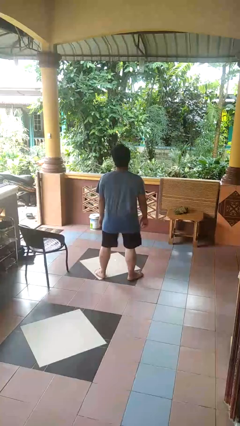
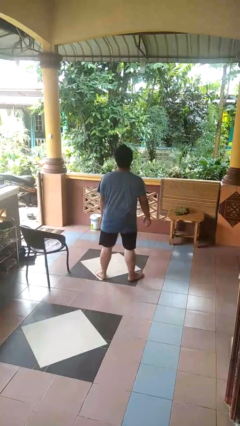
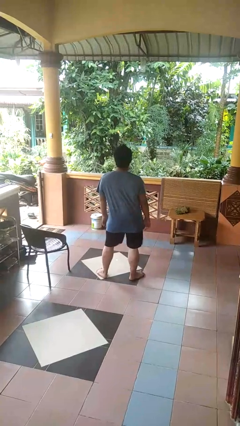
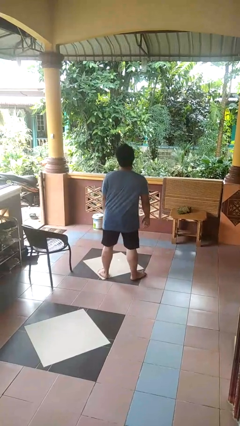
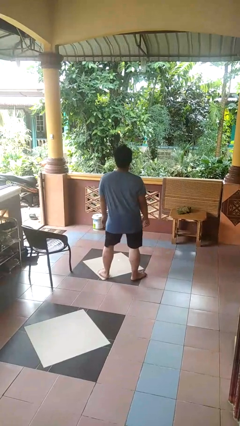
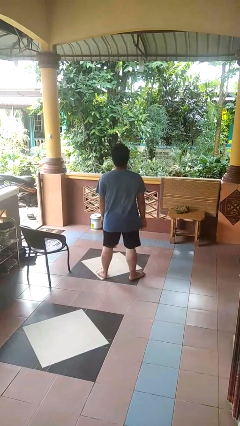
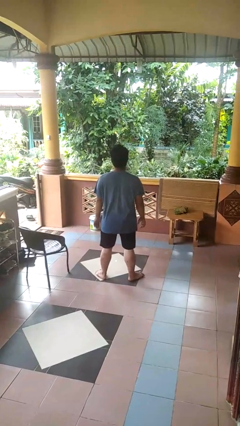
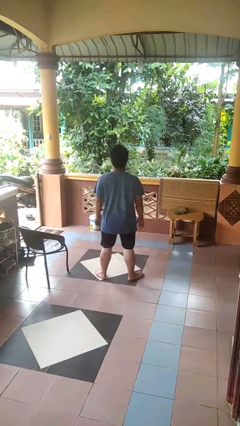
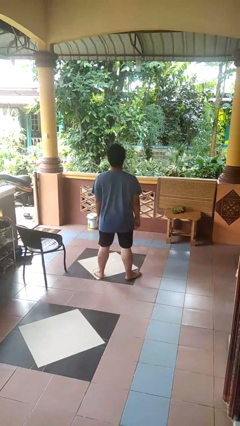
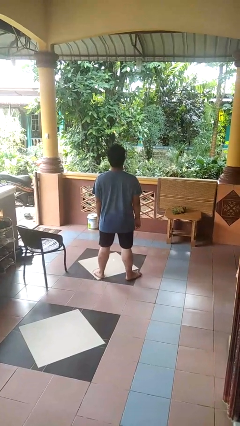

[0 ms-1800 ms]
person wiggles hips

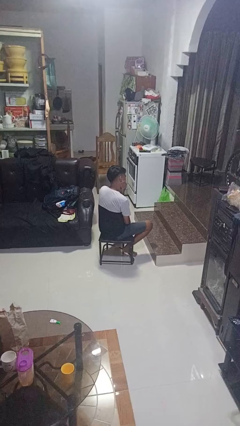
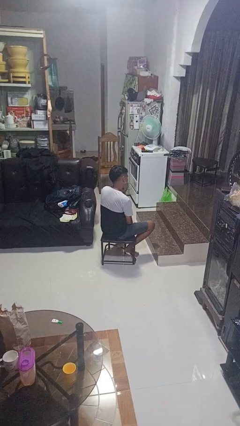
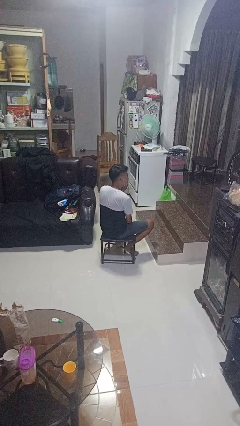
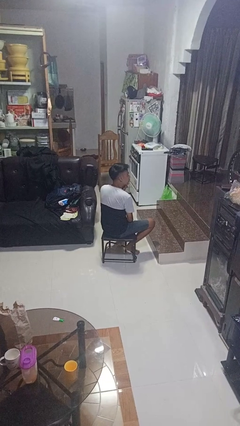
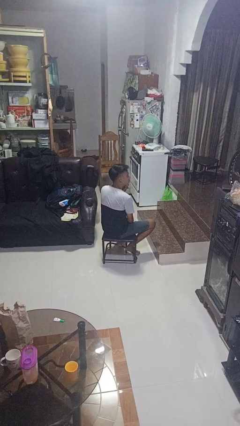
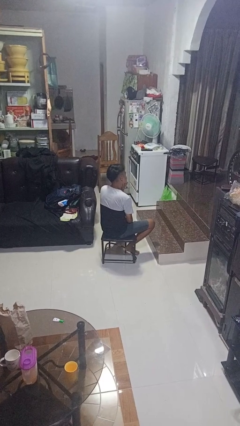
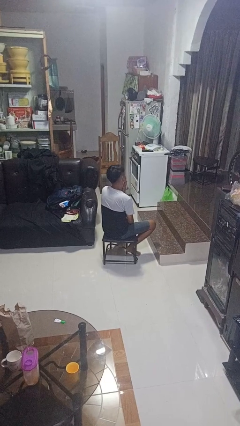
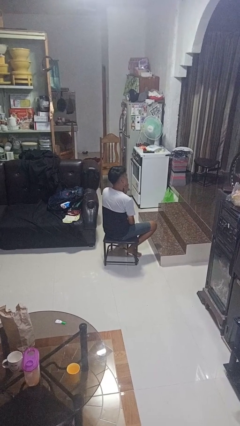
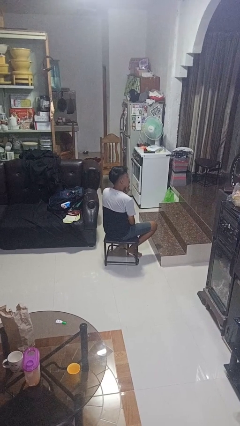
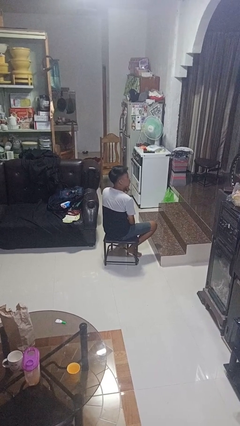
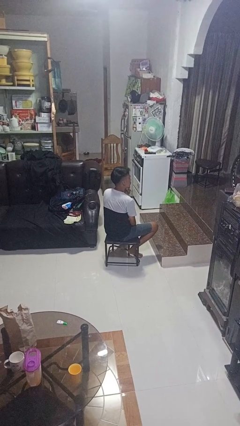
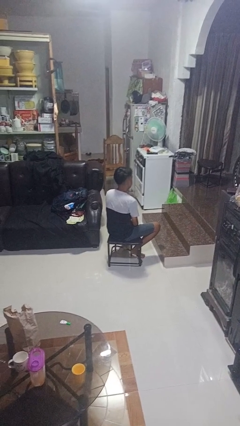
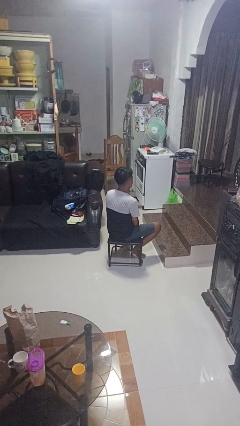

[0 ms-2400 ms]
person strokes chin

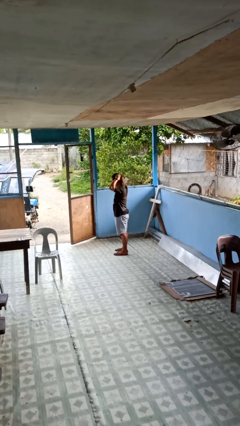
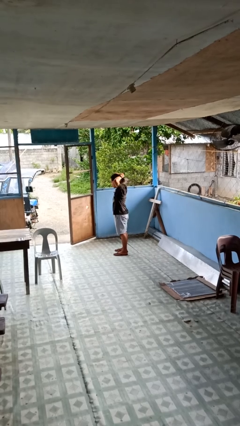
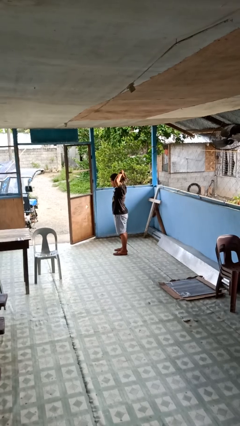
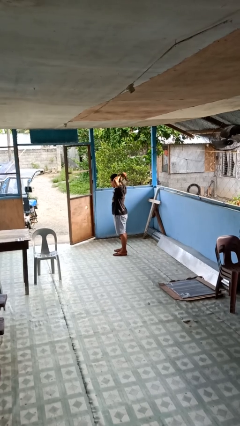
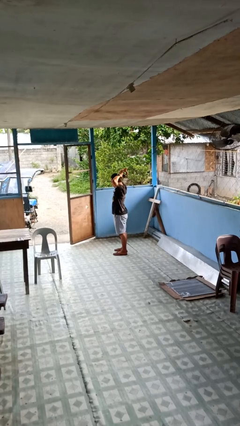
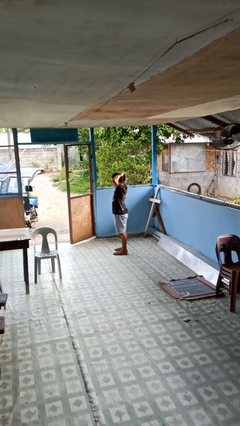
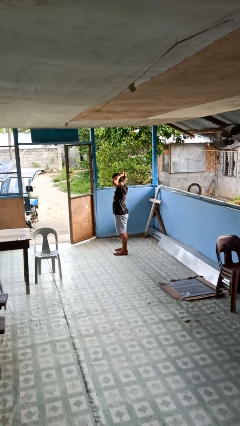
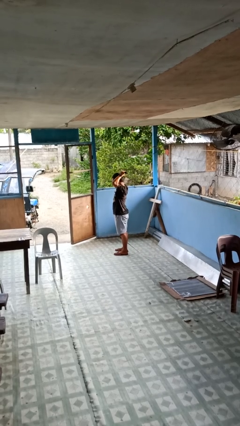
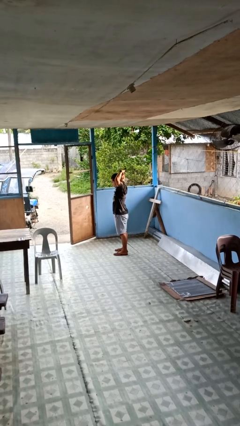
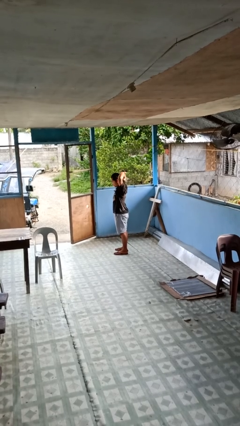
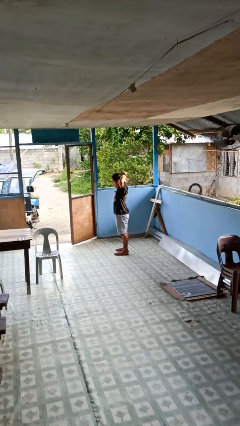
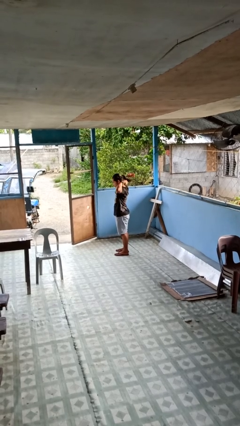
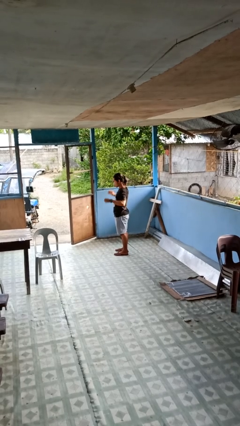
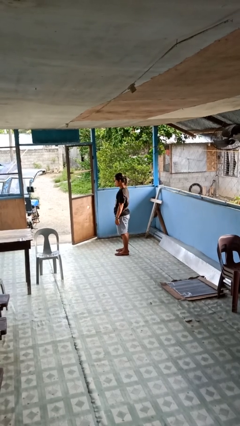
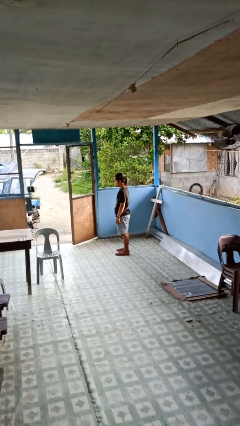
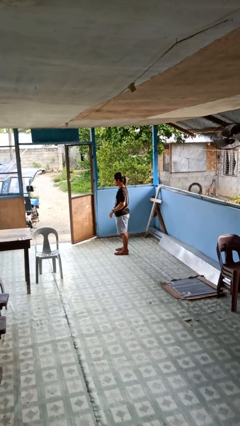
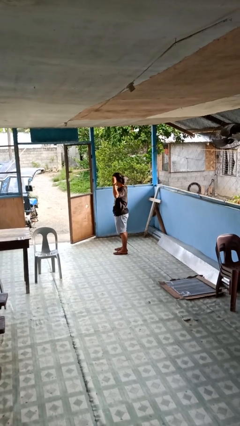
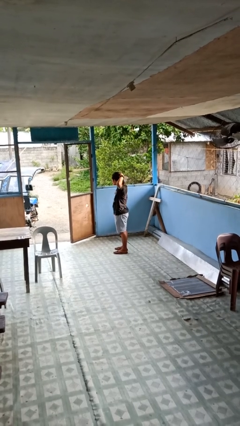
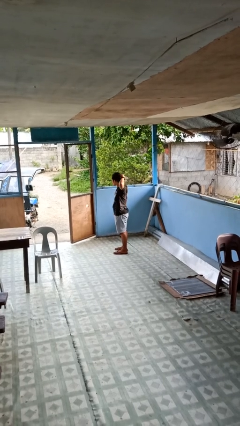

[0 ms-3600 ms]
person puts hair in ponytail

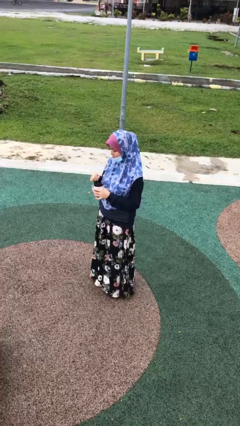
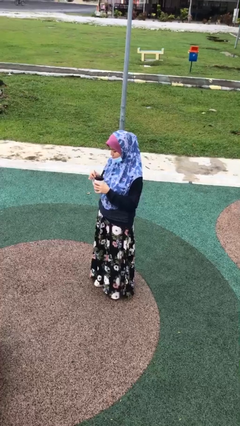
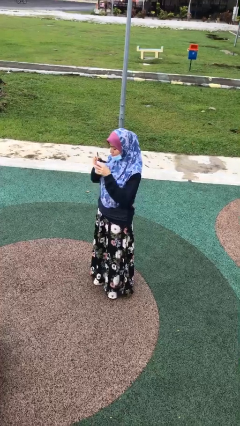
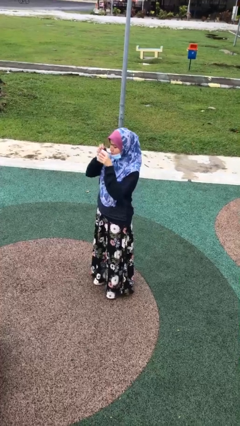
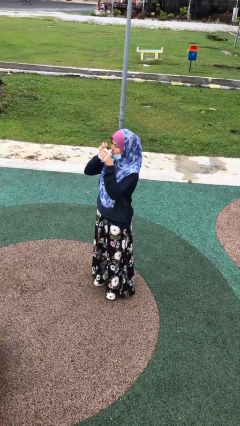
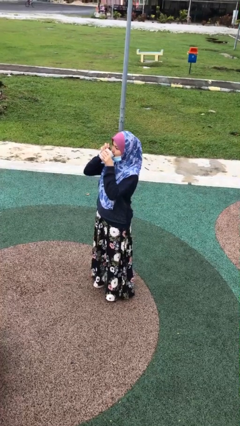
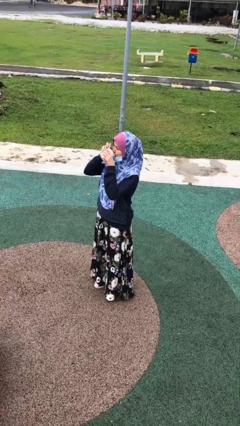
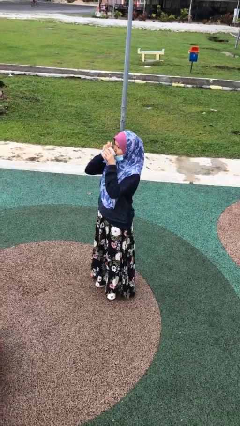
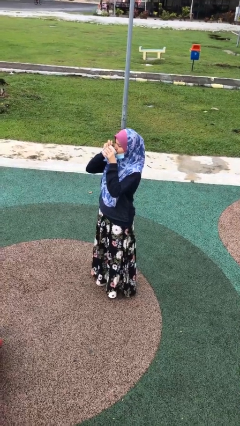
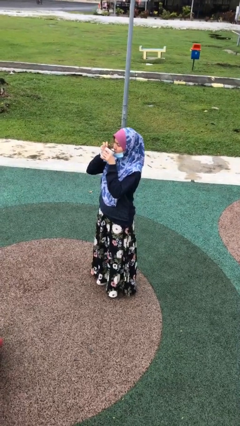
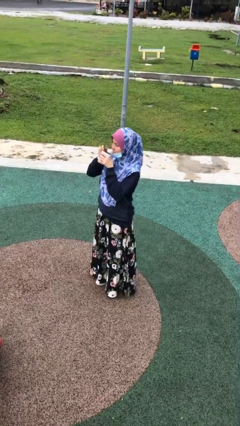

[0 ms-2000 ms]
person drinks from mug

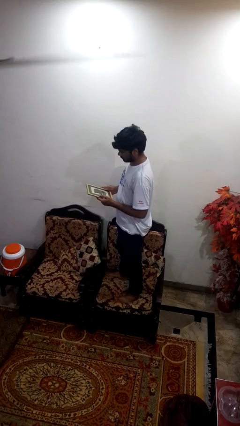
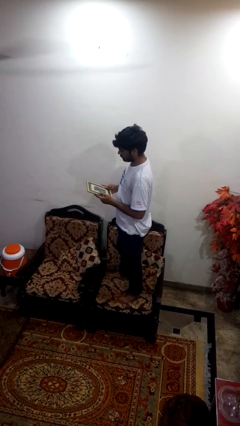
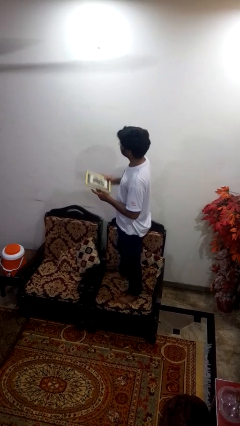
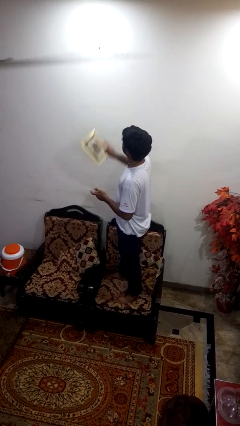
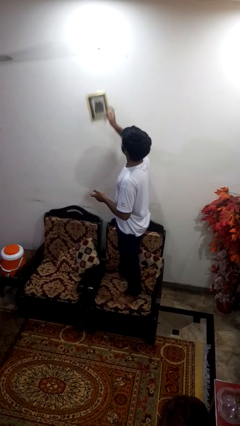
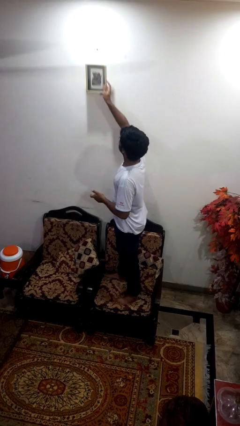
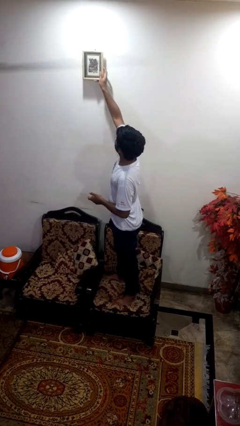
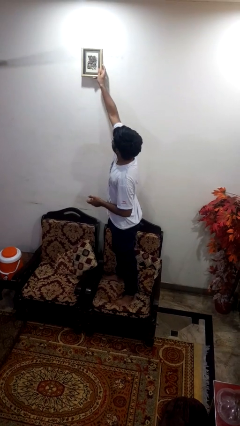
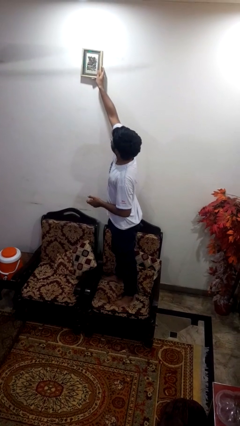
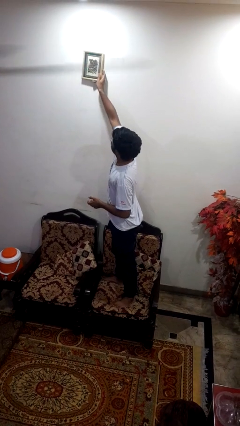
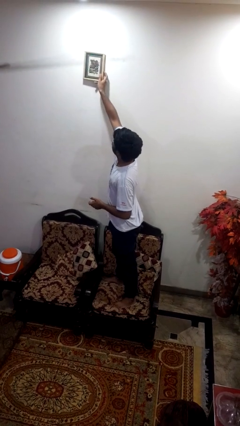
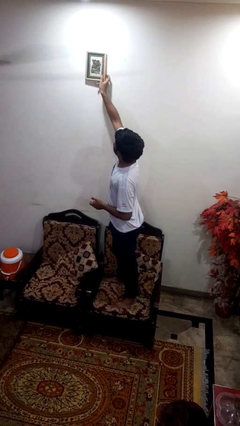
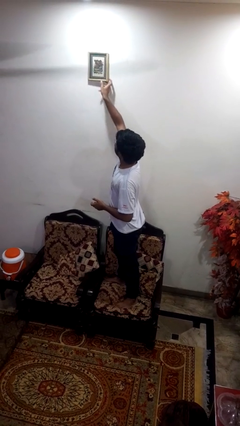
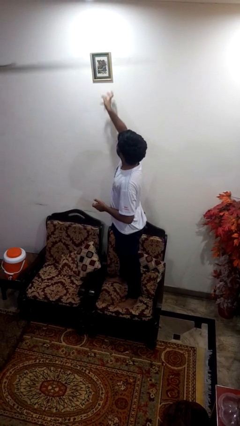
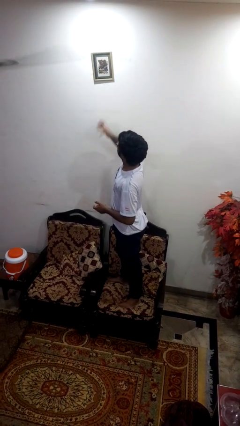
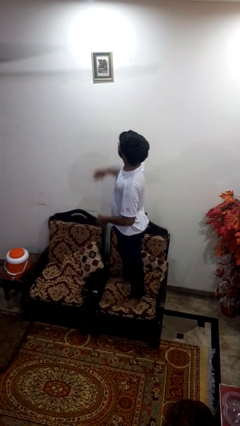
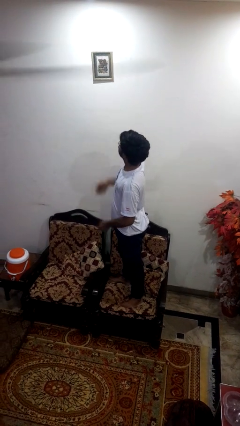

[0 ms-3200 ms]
person puts up picture frame

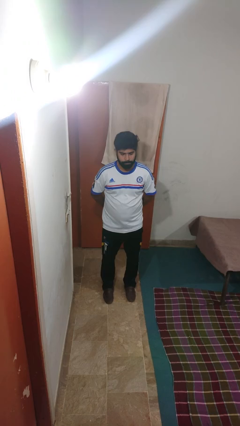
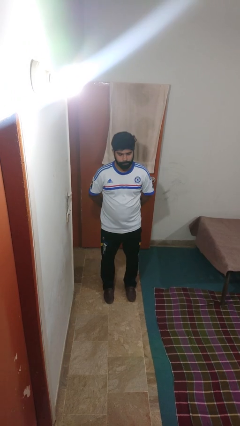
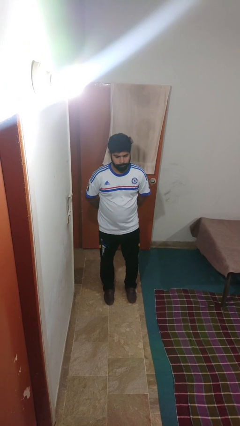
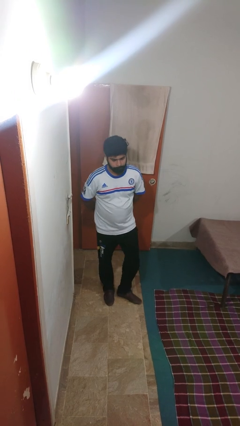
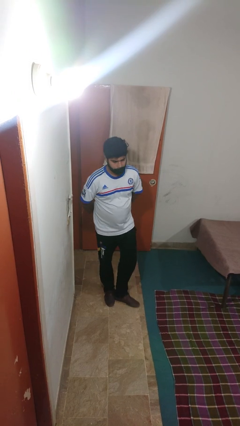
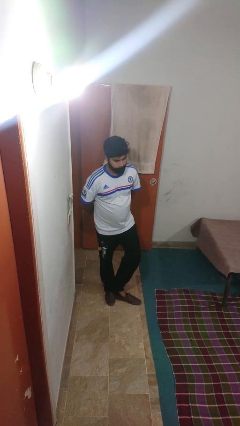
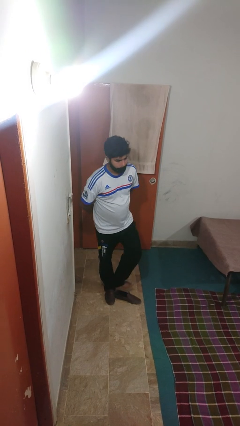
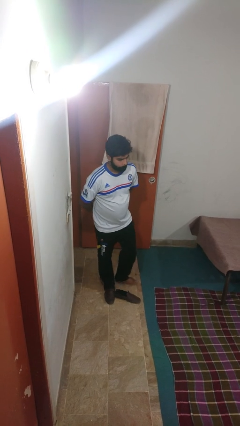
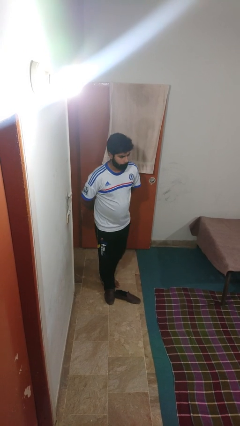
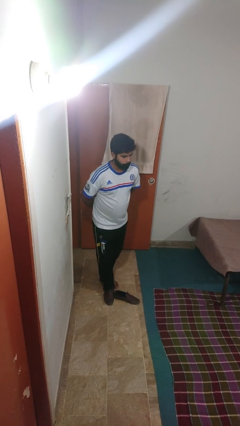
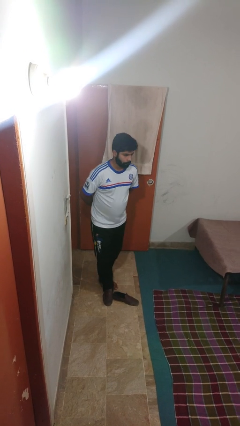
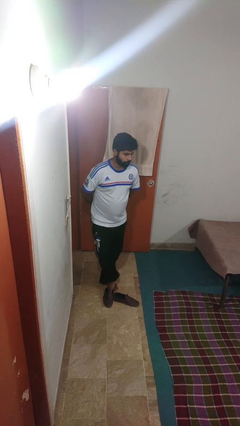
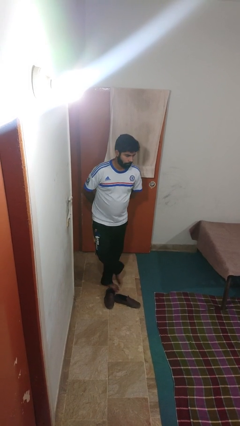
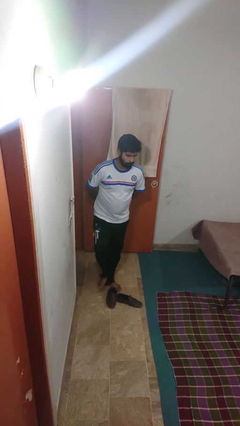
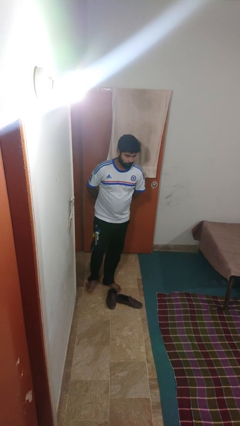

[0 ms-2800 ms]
person takes off shoes

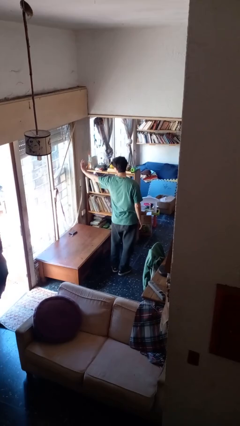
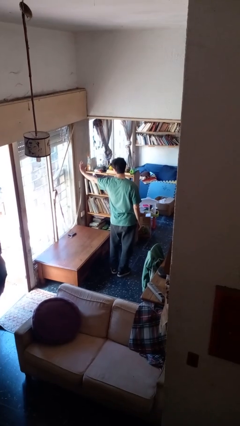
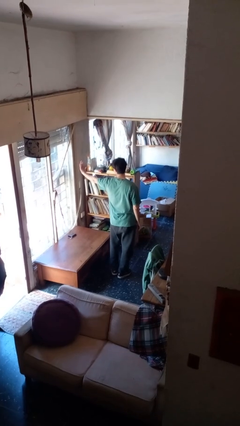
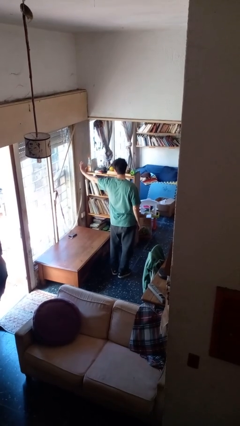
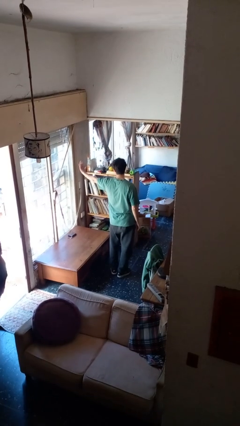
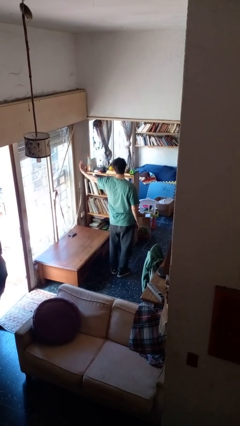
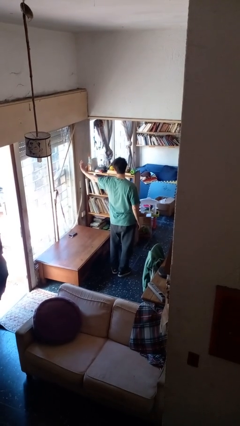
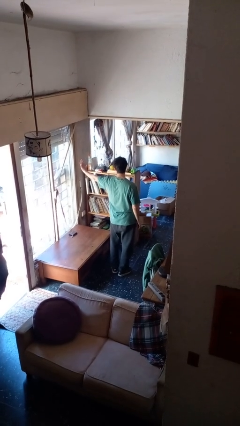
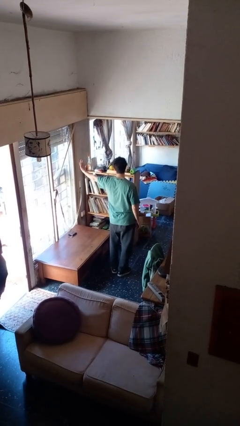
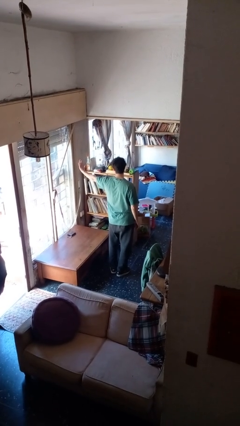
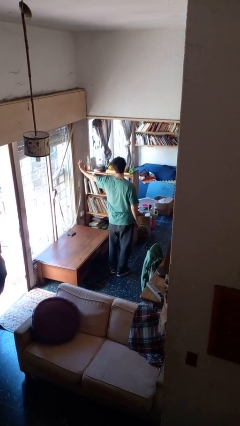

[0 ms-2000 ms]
person gestures stop
